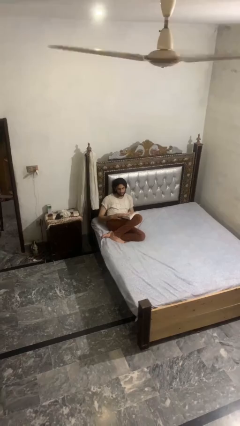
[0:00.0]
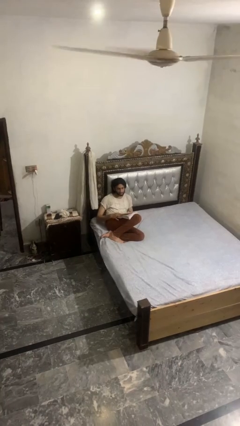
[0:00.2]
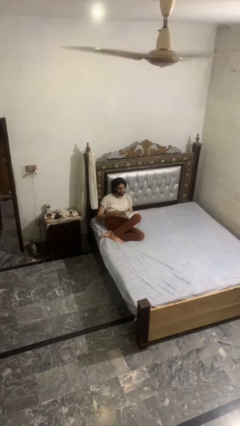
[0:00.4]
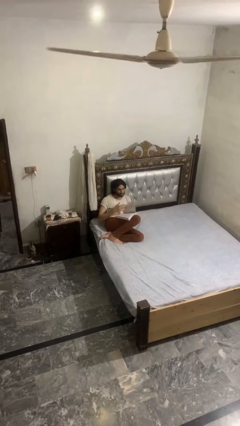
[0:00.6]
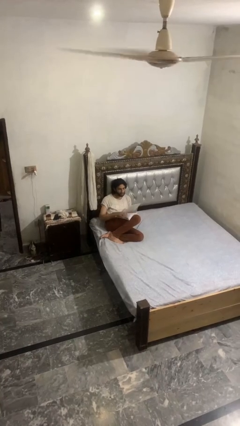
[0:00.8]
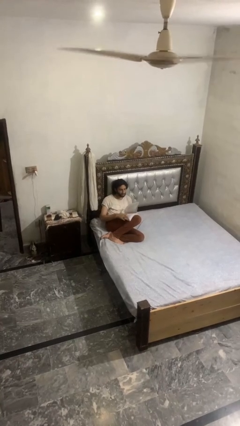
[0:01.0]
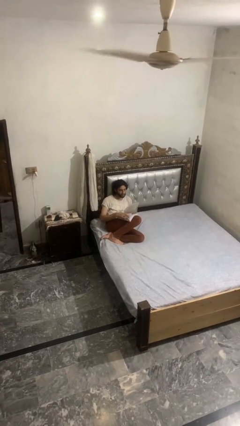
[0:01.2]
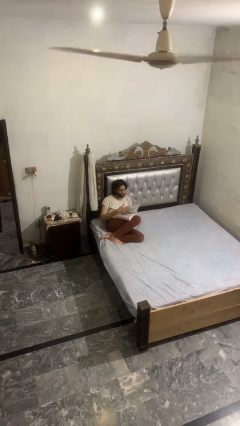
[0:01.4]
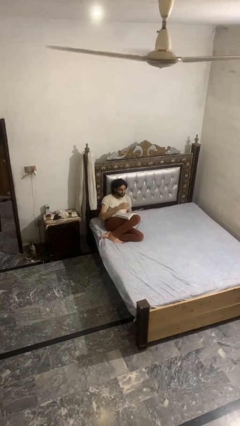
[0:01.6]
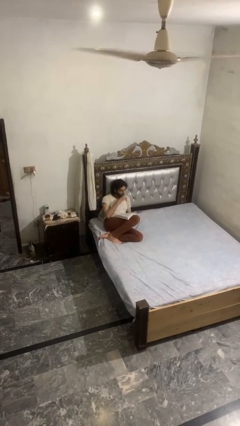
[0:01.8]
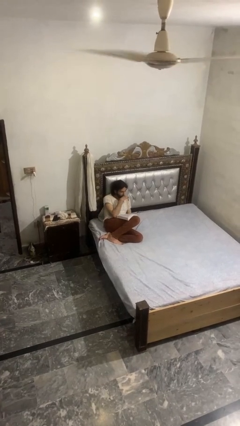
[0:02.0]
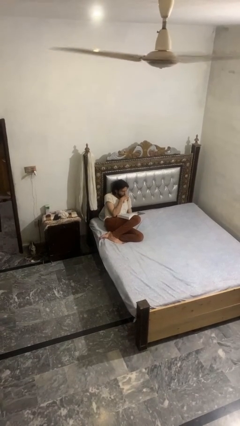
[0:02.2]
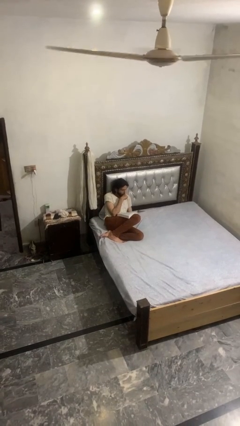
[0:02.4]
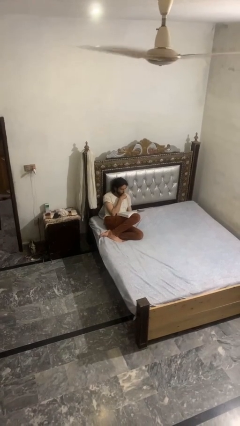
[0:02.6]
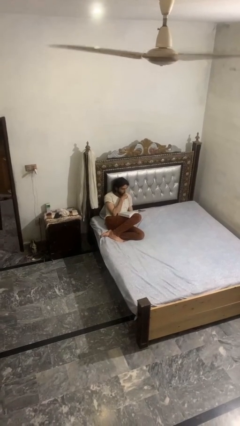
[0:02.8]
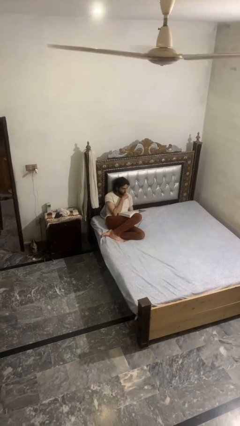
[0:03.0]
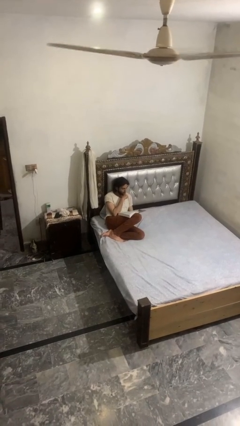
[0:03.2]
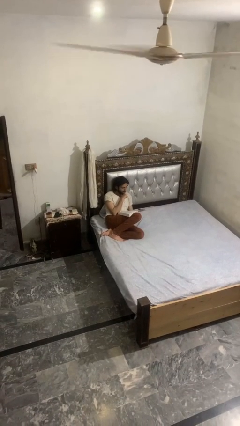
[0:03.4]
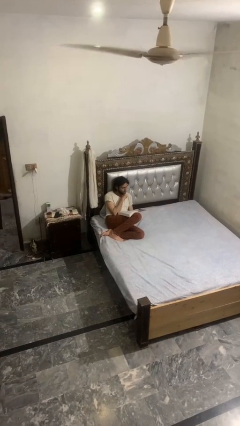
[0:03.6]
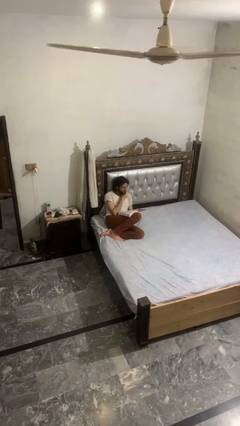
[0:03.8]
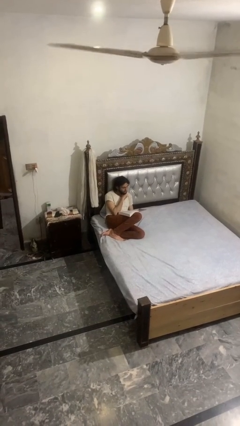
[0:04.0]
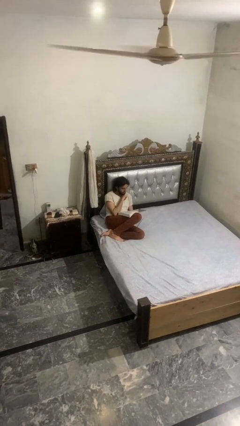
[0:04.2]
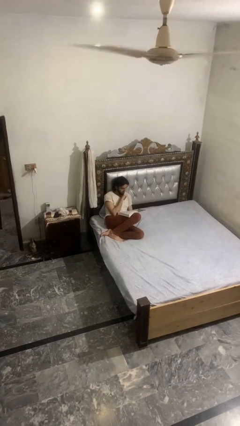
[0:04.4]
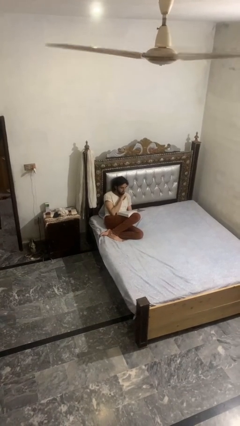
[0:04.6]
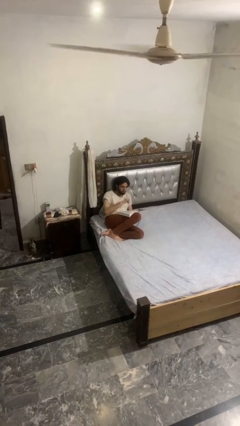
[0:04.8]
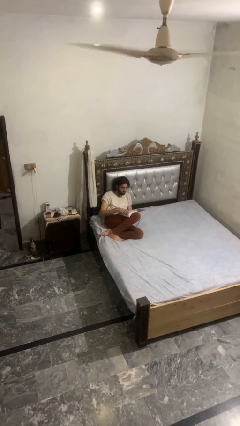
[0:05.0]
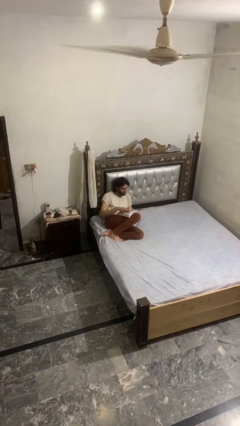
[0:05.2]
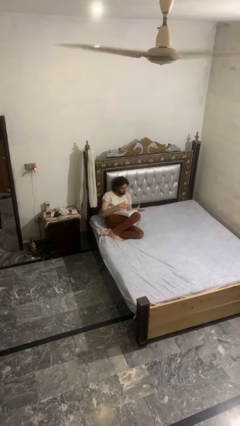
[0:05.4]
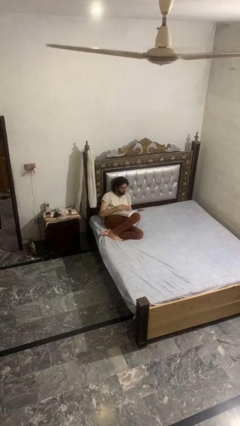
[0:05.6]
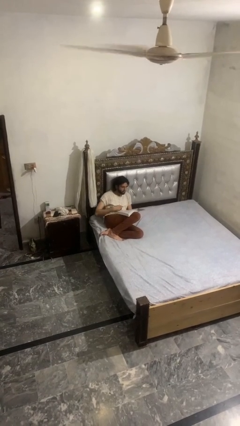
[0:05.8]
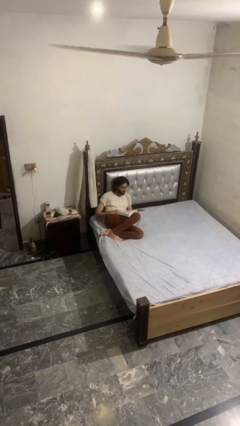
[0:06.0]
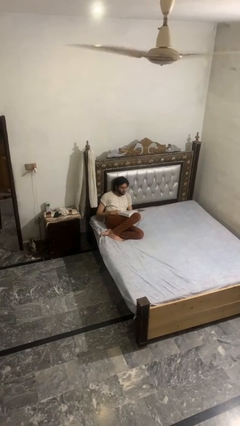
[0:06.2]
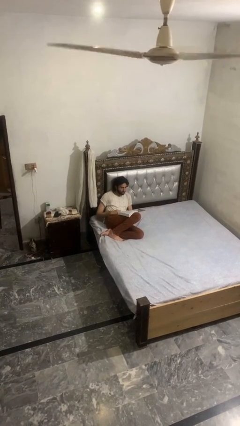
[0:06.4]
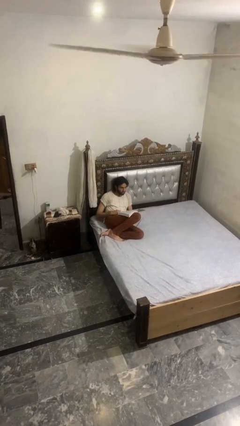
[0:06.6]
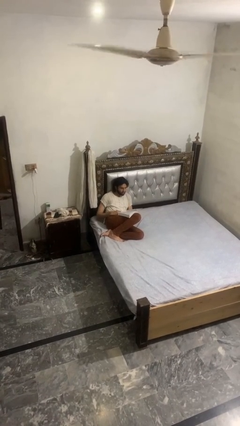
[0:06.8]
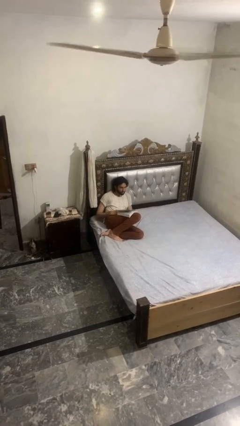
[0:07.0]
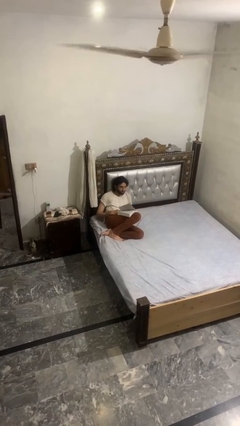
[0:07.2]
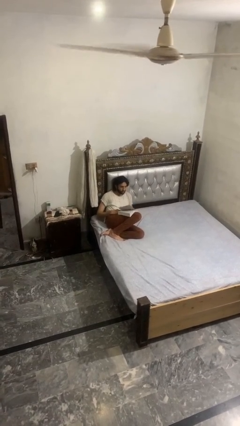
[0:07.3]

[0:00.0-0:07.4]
person reads book

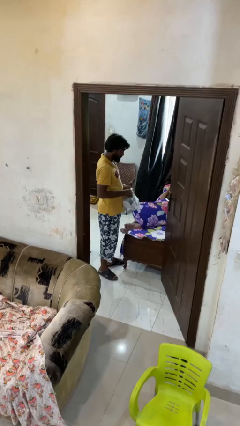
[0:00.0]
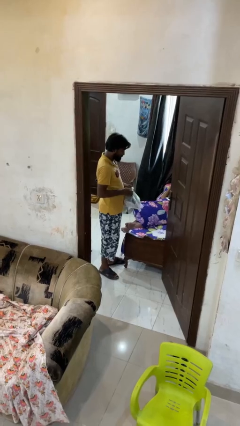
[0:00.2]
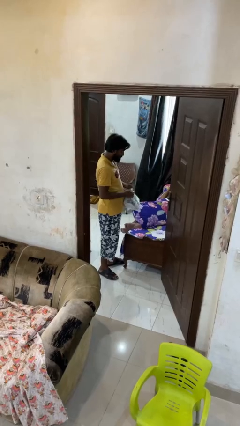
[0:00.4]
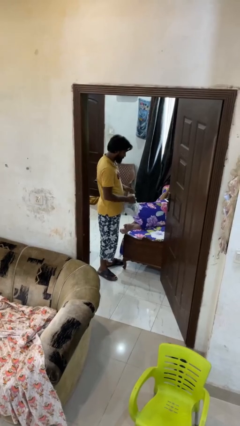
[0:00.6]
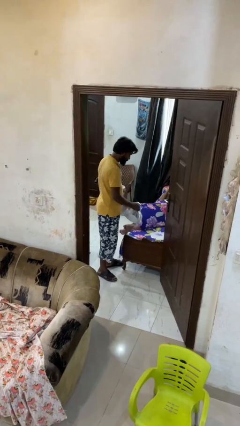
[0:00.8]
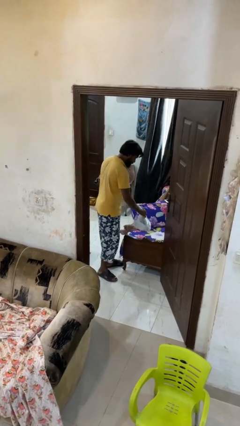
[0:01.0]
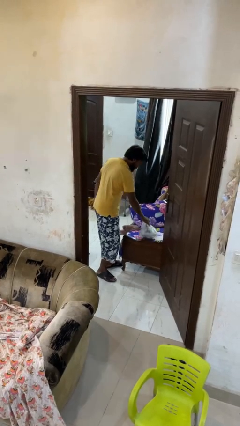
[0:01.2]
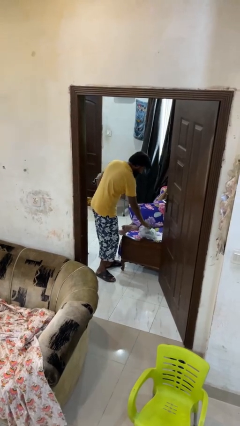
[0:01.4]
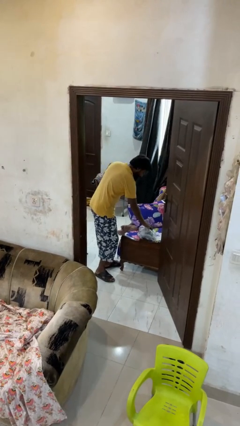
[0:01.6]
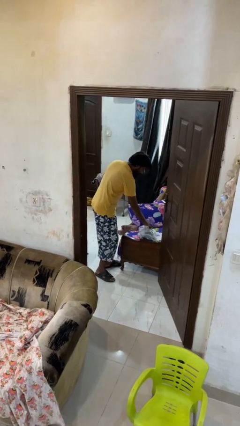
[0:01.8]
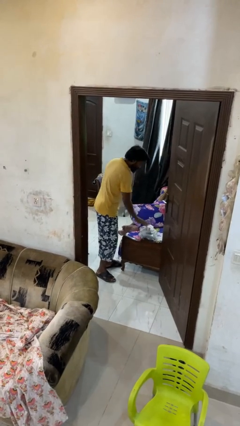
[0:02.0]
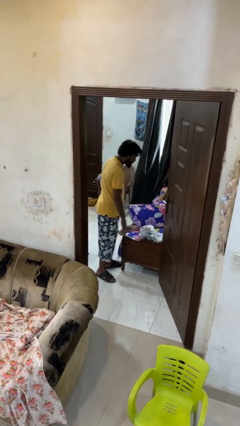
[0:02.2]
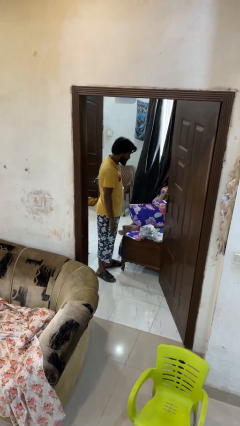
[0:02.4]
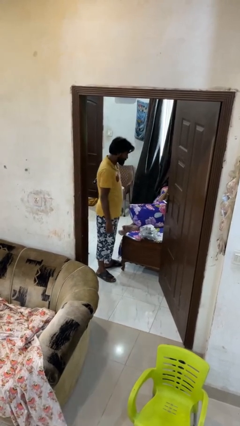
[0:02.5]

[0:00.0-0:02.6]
person puts down object on bed

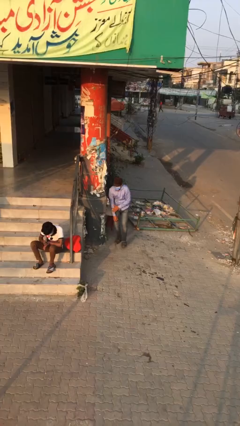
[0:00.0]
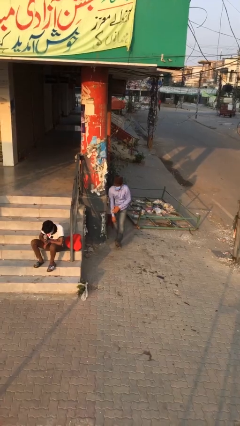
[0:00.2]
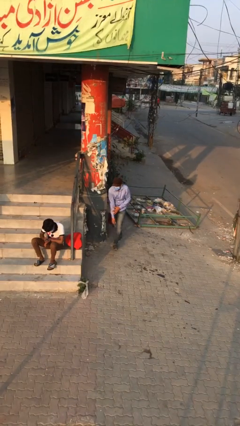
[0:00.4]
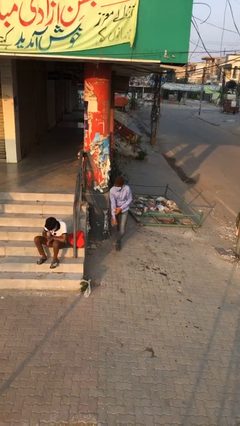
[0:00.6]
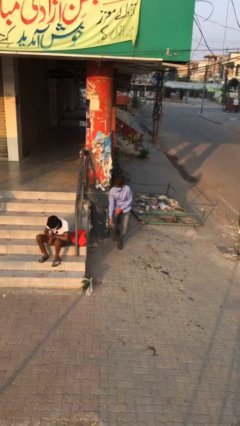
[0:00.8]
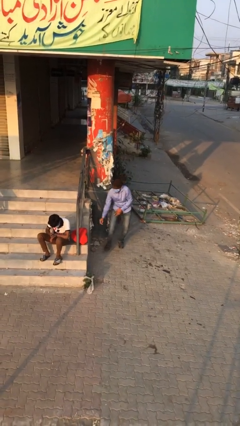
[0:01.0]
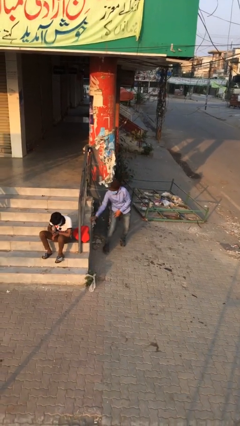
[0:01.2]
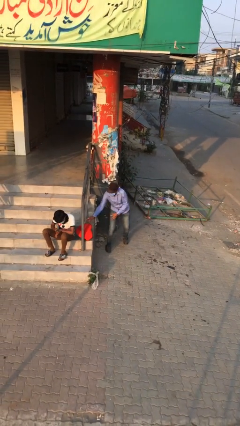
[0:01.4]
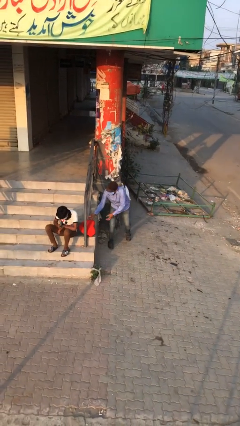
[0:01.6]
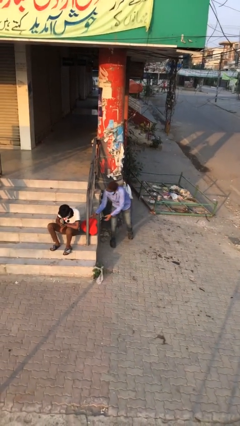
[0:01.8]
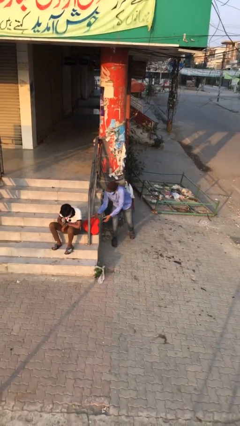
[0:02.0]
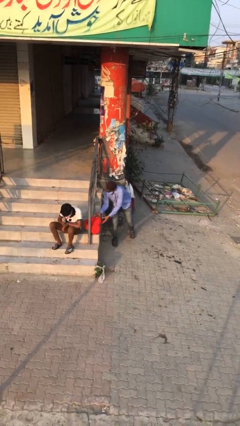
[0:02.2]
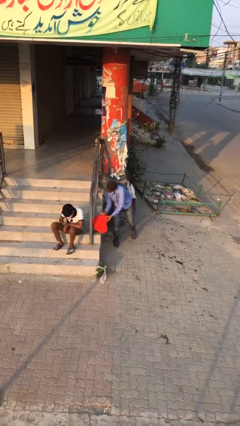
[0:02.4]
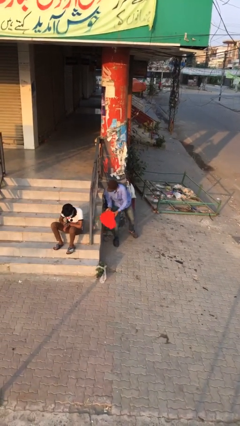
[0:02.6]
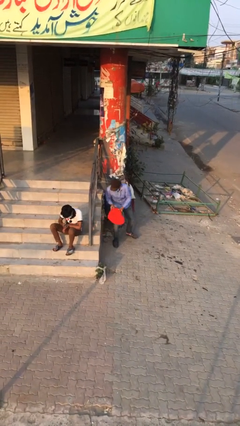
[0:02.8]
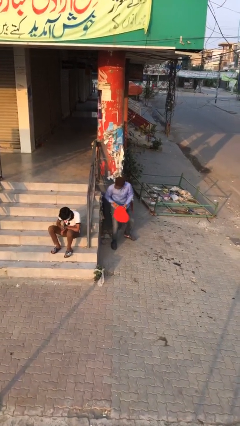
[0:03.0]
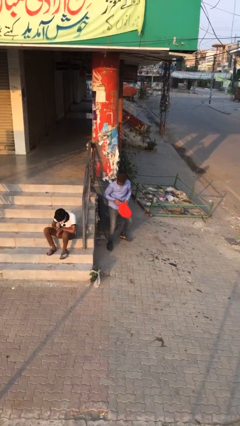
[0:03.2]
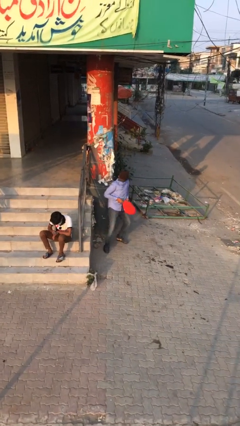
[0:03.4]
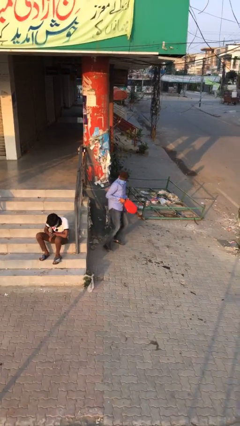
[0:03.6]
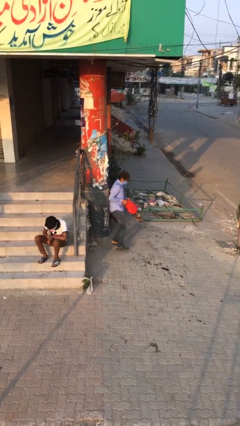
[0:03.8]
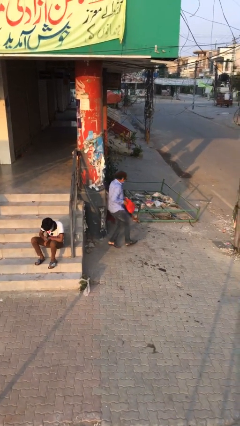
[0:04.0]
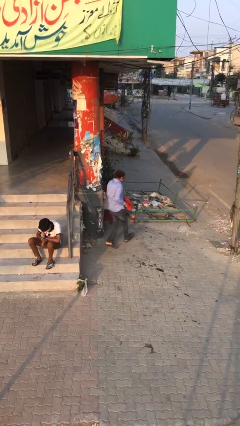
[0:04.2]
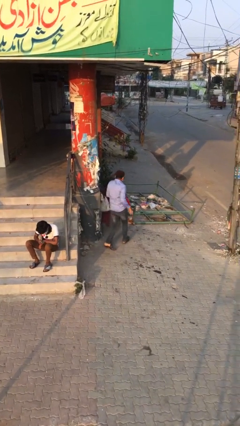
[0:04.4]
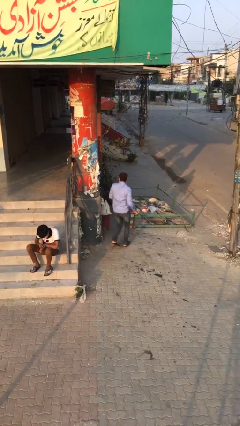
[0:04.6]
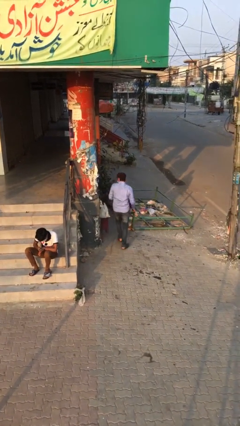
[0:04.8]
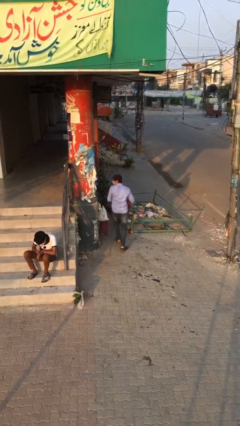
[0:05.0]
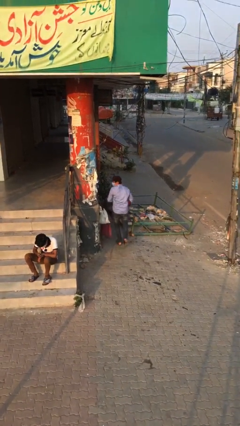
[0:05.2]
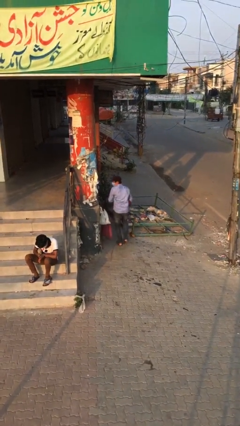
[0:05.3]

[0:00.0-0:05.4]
person steals object from person

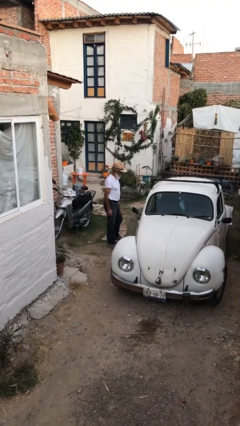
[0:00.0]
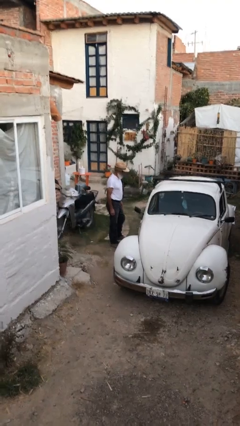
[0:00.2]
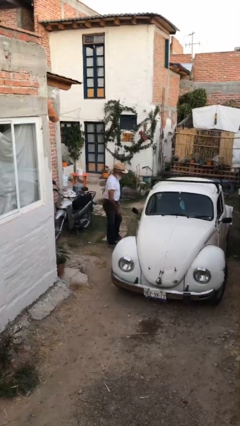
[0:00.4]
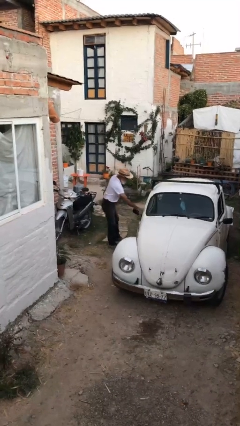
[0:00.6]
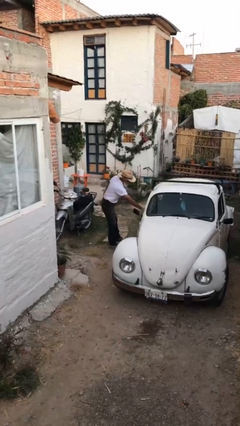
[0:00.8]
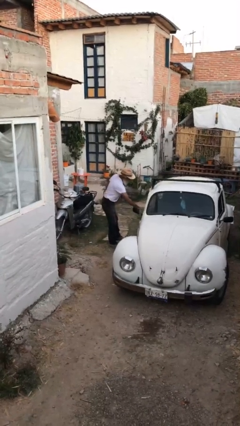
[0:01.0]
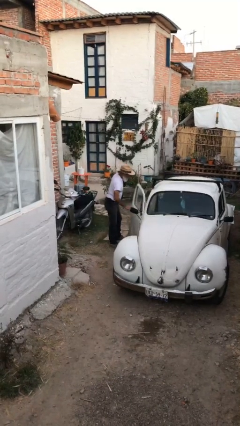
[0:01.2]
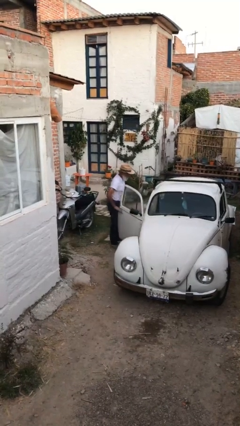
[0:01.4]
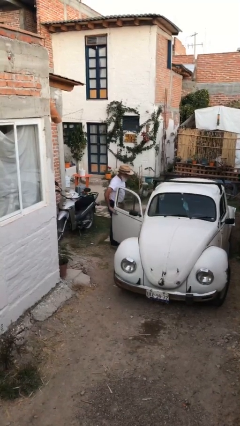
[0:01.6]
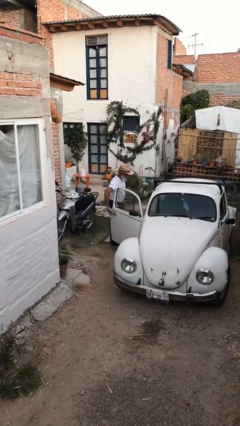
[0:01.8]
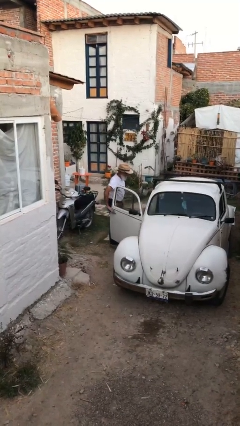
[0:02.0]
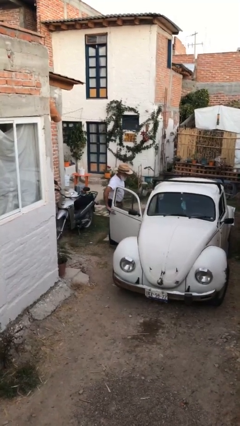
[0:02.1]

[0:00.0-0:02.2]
person opens car door
